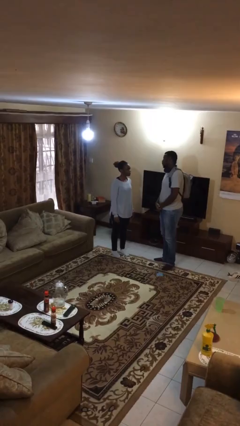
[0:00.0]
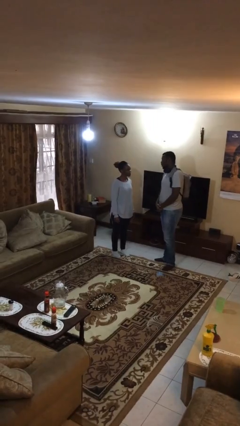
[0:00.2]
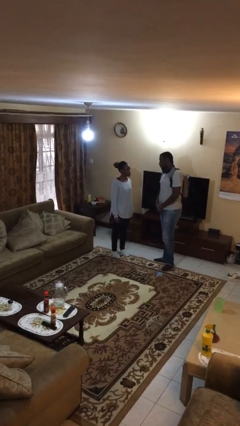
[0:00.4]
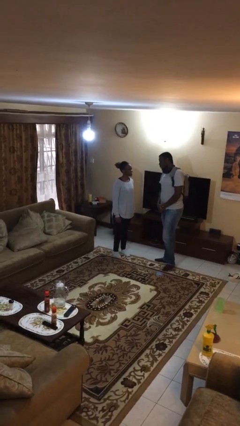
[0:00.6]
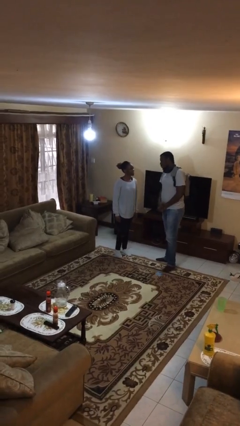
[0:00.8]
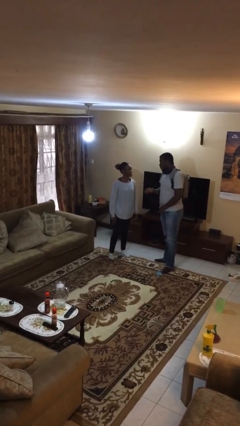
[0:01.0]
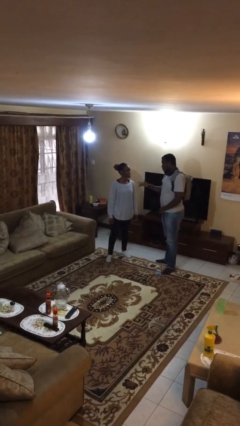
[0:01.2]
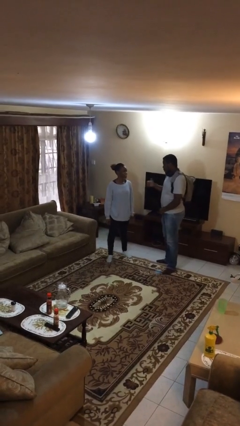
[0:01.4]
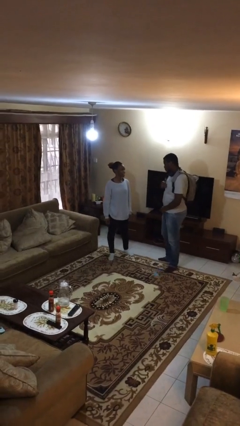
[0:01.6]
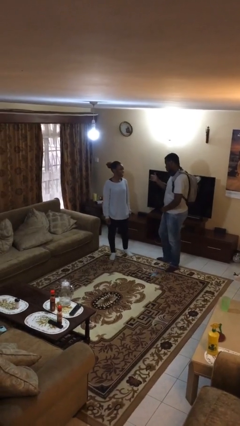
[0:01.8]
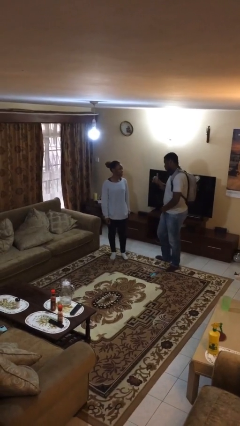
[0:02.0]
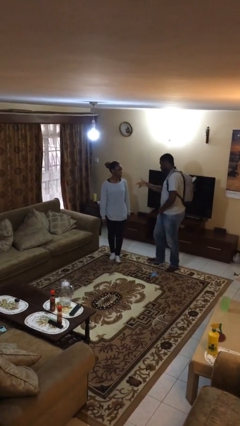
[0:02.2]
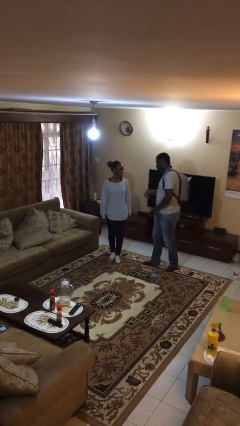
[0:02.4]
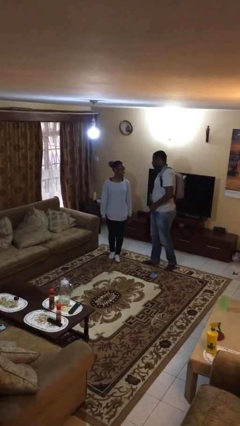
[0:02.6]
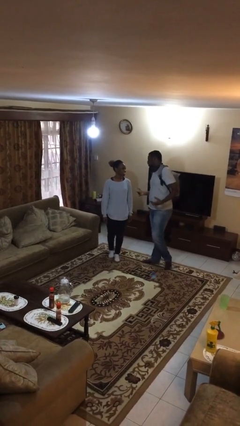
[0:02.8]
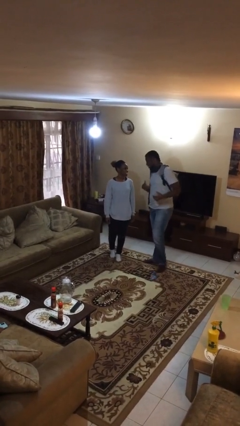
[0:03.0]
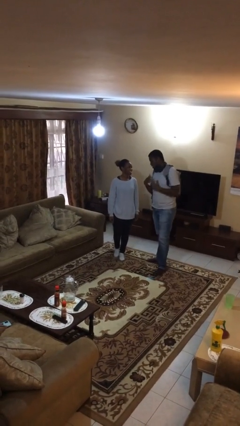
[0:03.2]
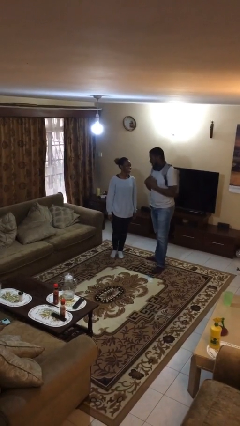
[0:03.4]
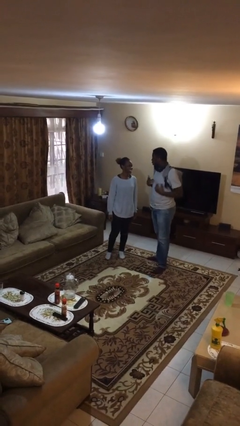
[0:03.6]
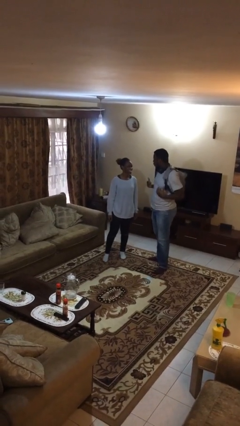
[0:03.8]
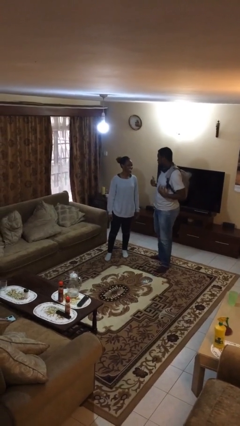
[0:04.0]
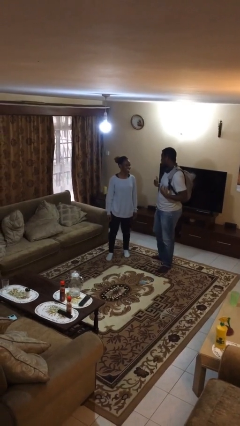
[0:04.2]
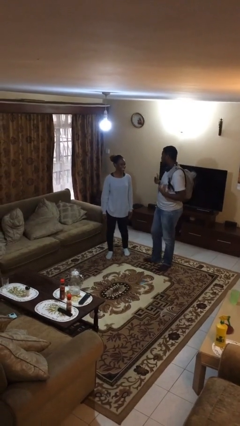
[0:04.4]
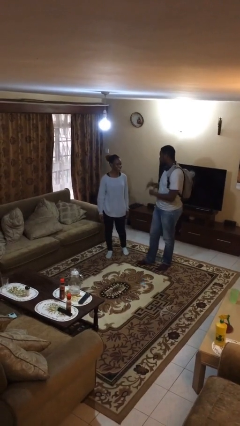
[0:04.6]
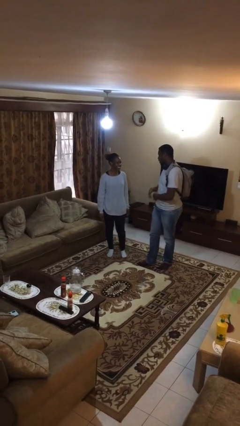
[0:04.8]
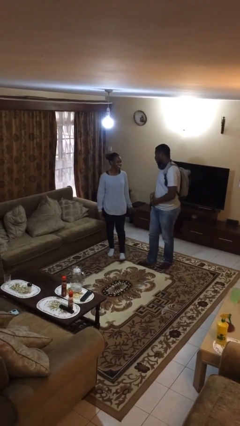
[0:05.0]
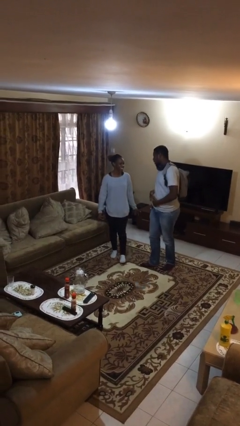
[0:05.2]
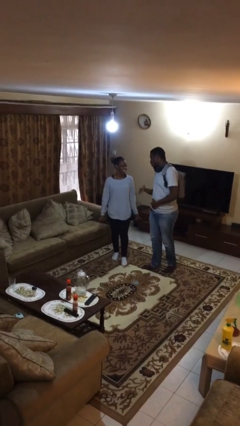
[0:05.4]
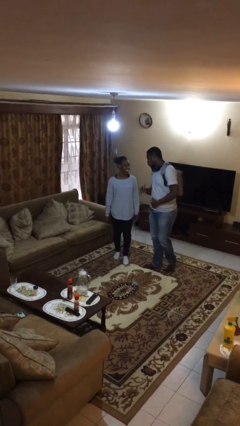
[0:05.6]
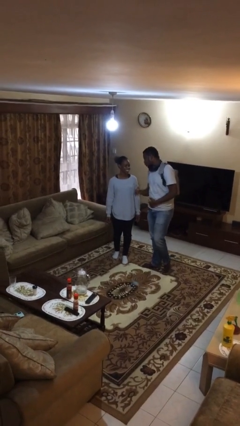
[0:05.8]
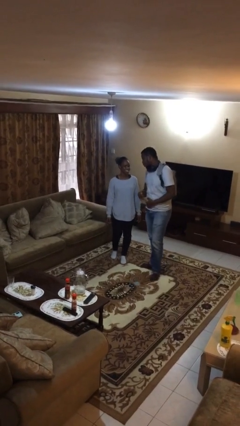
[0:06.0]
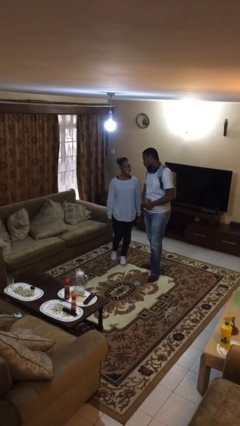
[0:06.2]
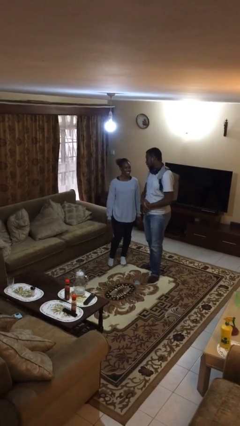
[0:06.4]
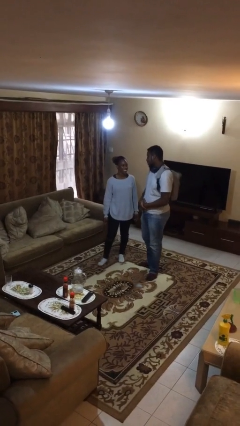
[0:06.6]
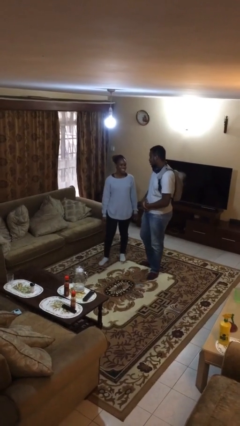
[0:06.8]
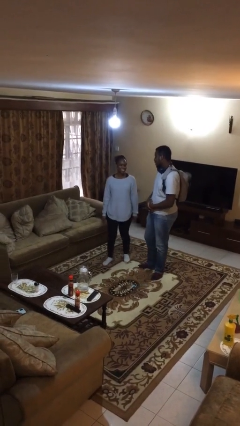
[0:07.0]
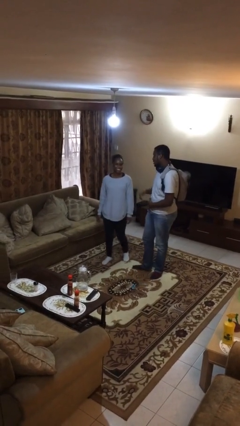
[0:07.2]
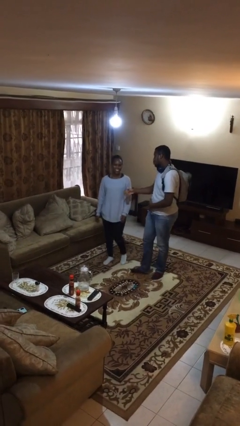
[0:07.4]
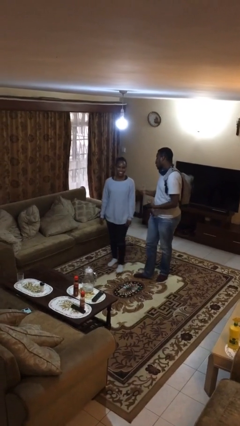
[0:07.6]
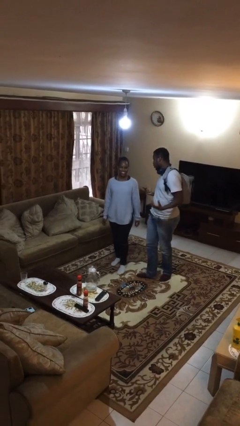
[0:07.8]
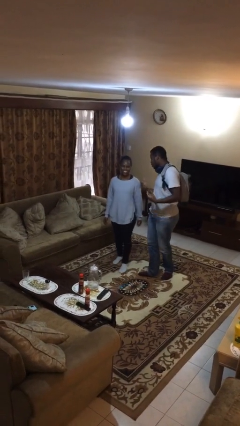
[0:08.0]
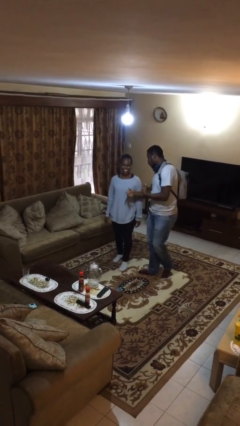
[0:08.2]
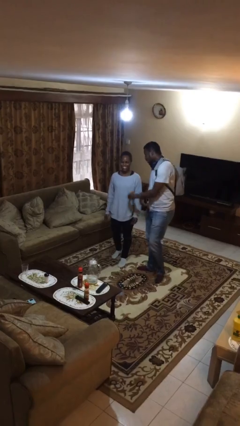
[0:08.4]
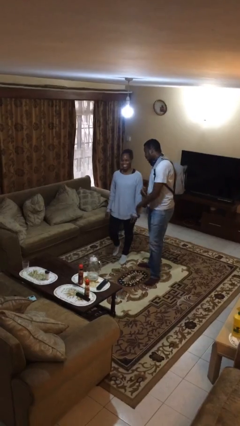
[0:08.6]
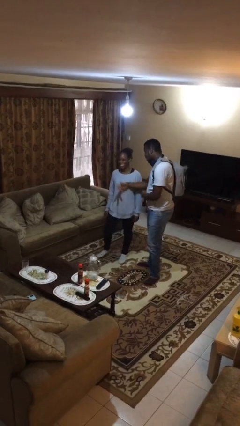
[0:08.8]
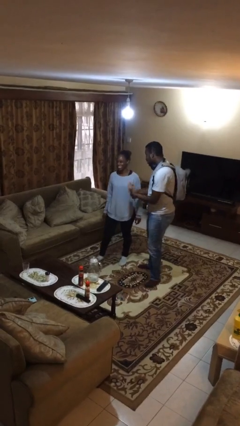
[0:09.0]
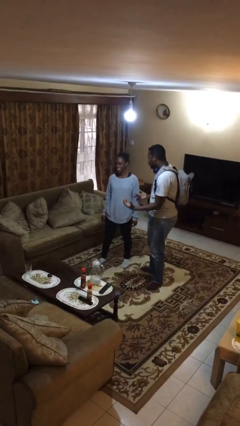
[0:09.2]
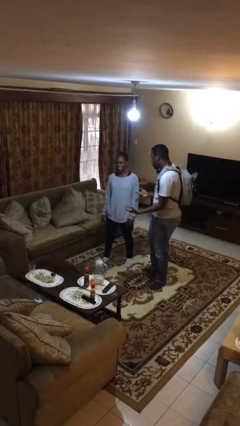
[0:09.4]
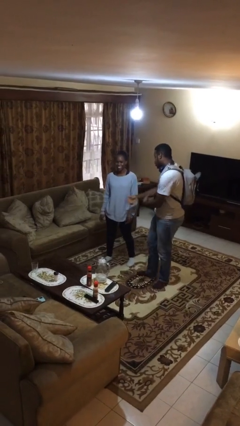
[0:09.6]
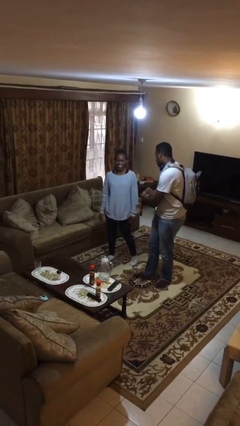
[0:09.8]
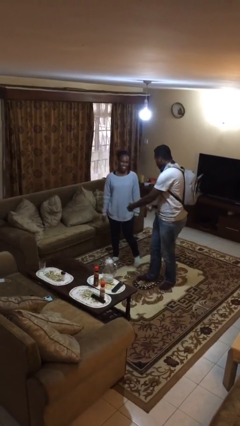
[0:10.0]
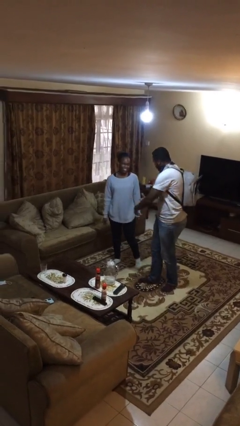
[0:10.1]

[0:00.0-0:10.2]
person talks to person

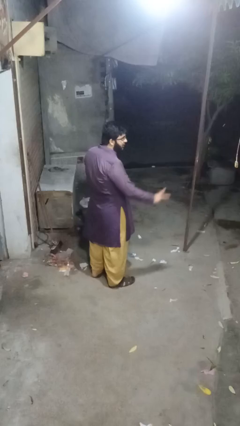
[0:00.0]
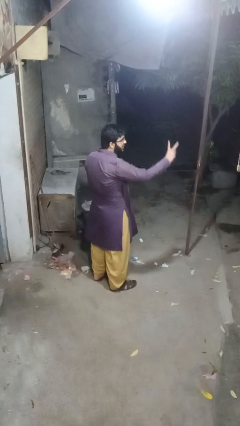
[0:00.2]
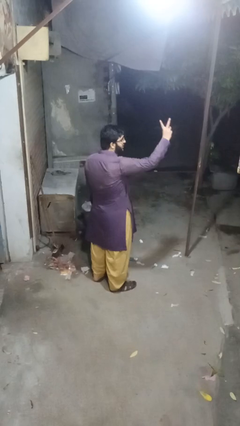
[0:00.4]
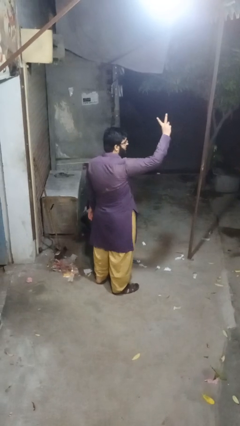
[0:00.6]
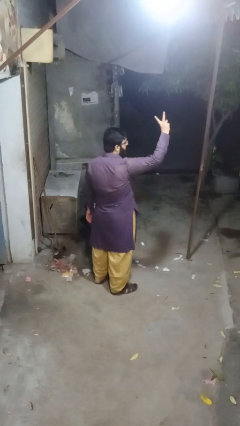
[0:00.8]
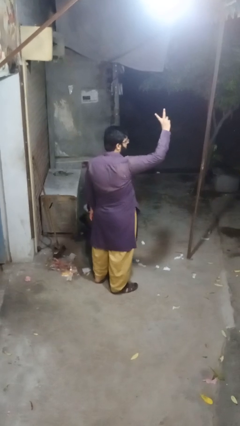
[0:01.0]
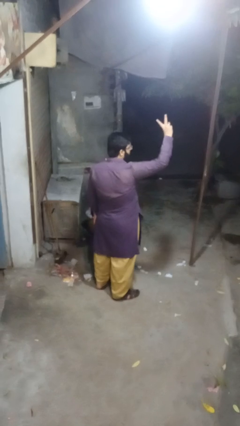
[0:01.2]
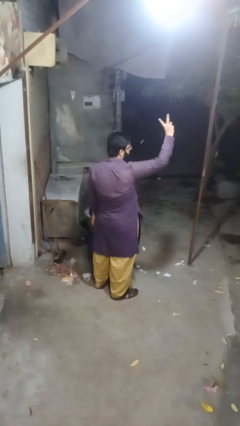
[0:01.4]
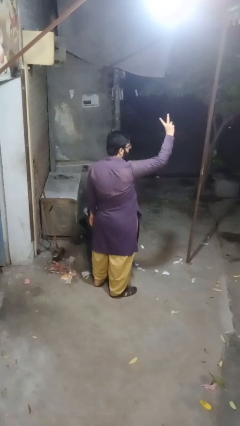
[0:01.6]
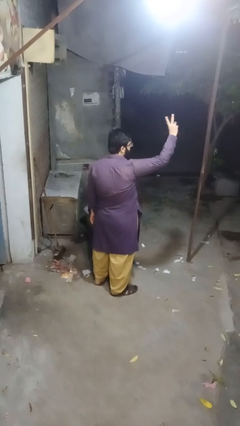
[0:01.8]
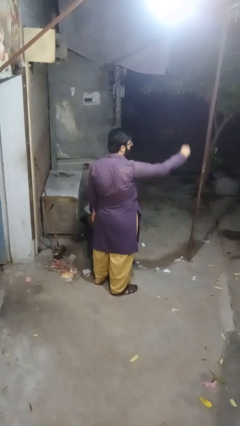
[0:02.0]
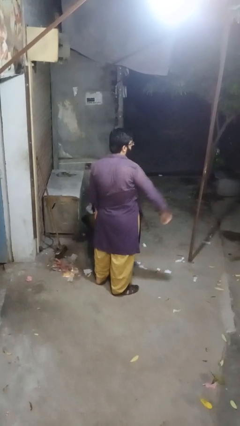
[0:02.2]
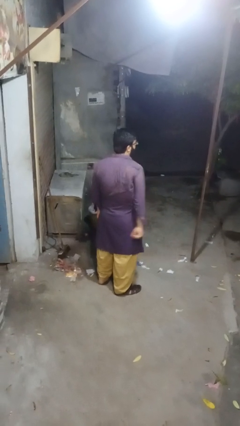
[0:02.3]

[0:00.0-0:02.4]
person gestures peace

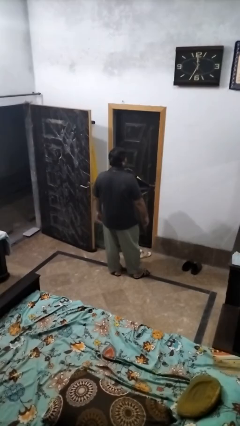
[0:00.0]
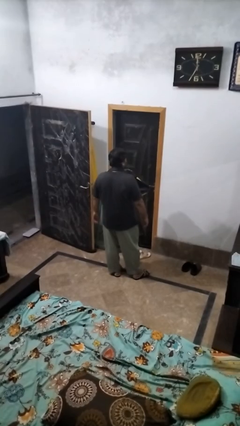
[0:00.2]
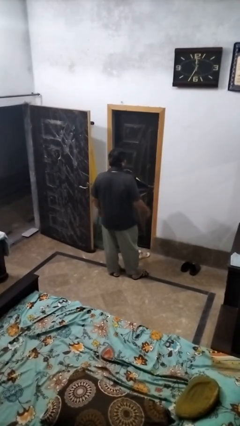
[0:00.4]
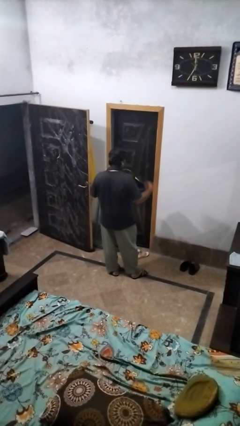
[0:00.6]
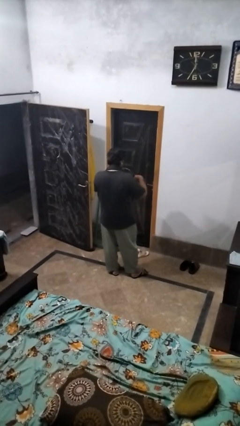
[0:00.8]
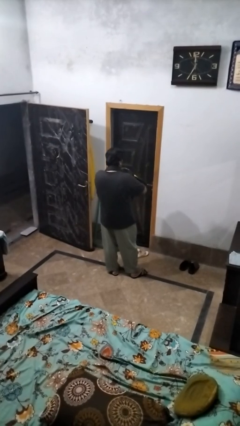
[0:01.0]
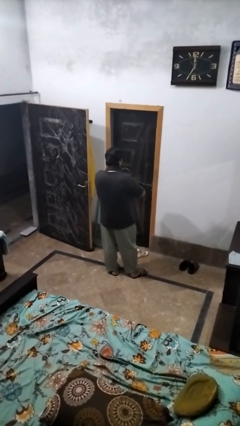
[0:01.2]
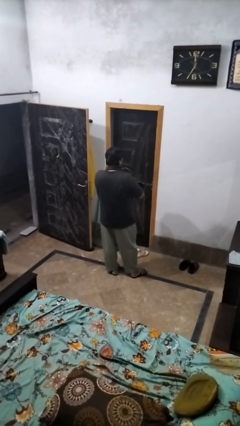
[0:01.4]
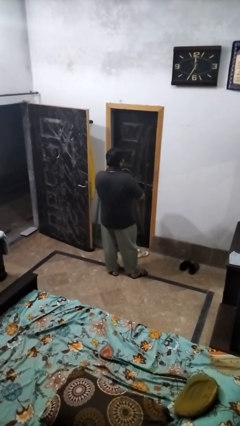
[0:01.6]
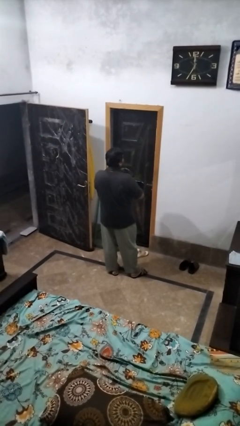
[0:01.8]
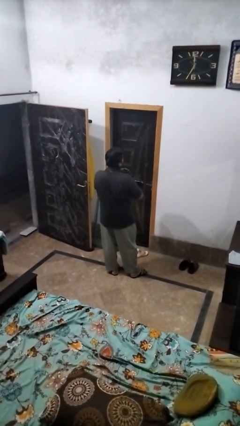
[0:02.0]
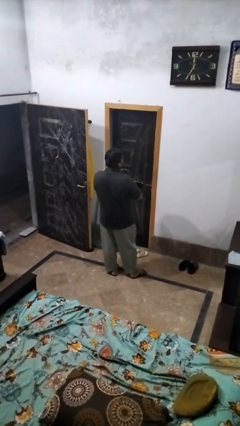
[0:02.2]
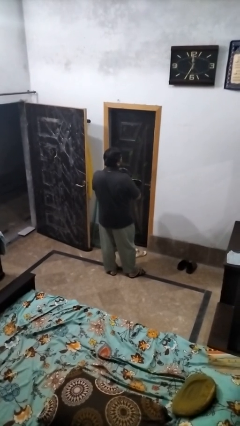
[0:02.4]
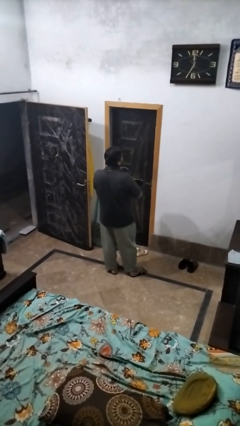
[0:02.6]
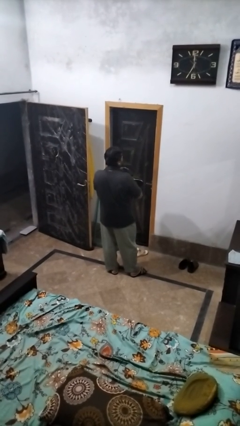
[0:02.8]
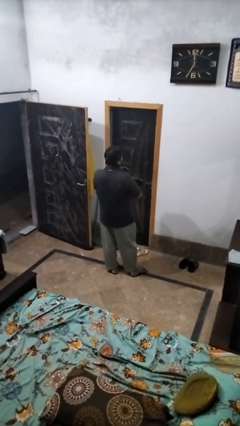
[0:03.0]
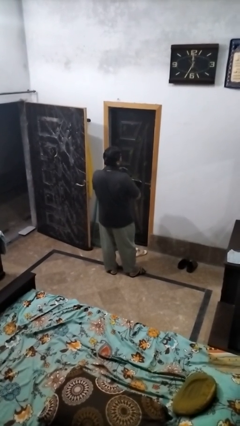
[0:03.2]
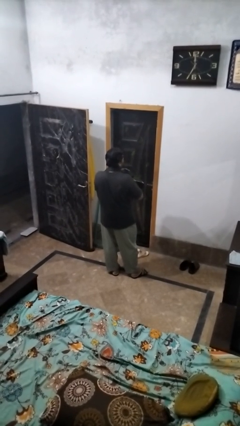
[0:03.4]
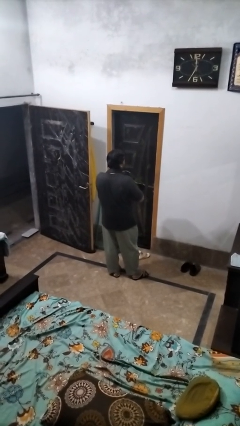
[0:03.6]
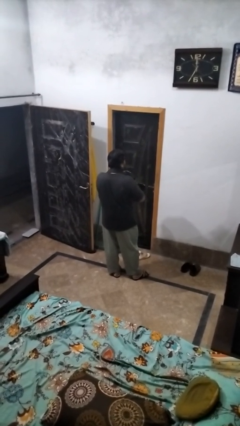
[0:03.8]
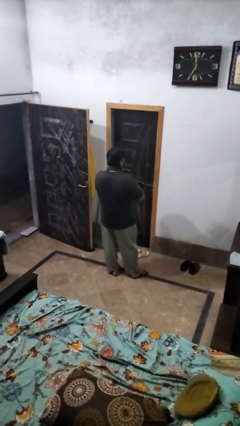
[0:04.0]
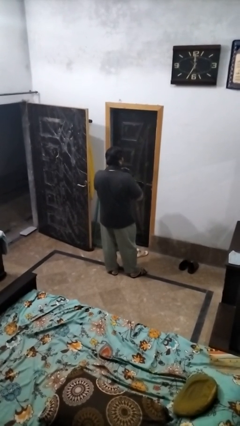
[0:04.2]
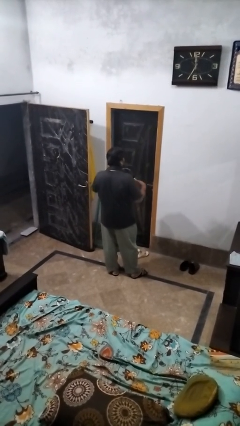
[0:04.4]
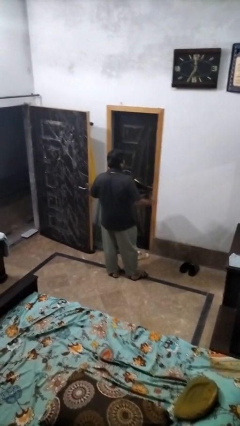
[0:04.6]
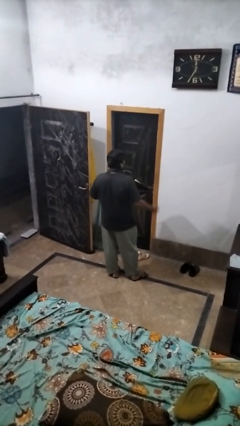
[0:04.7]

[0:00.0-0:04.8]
person searches in bag
